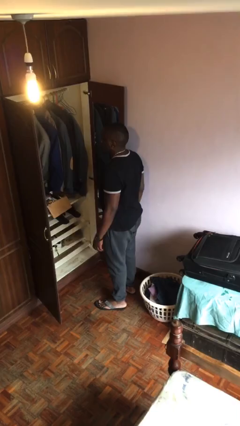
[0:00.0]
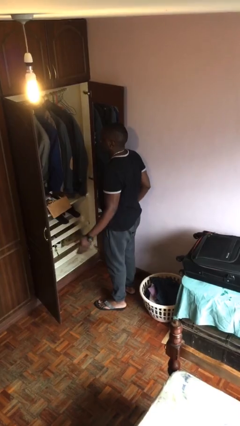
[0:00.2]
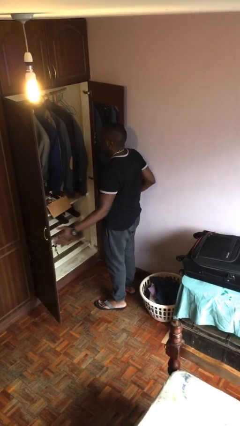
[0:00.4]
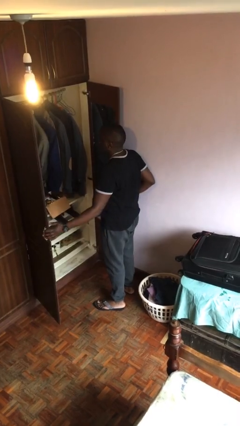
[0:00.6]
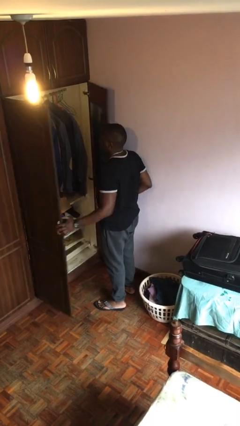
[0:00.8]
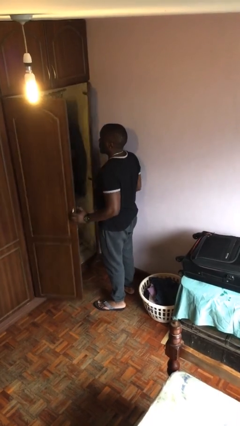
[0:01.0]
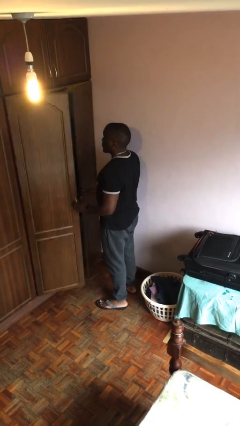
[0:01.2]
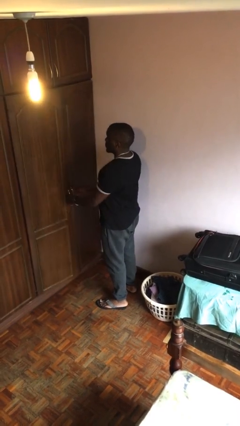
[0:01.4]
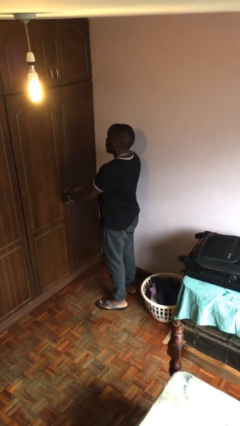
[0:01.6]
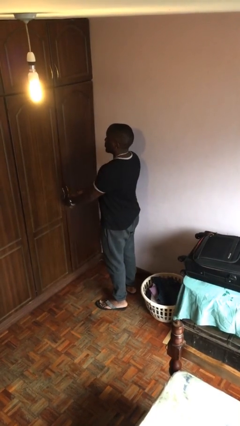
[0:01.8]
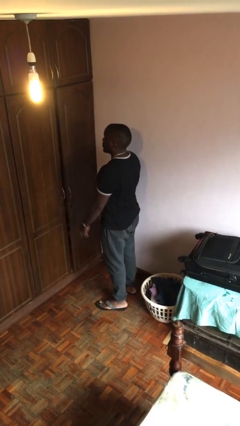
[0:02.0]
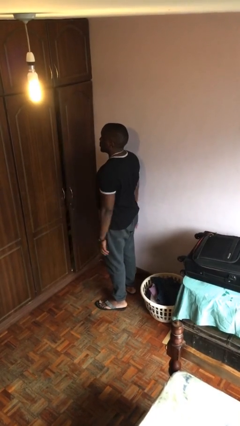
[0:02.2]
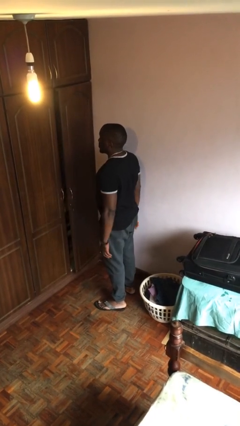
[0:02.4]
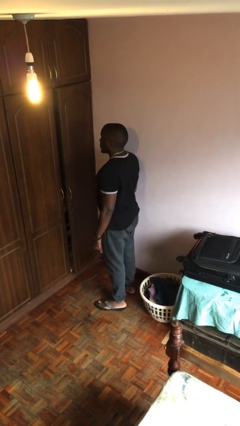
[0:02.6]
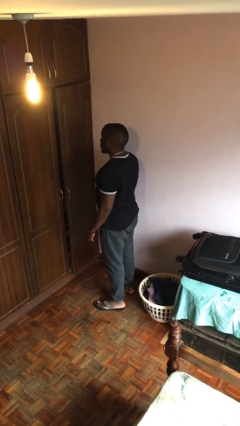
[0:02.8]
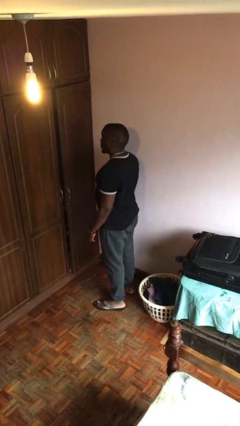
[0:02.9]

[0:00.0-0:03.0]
person closes closet door

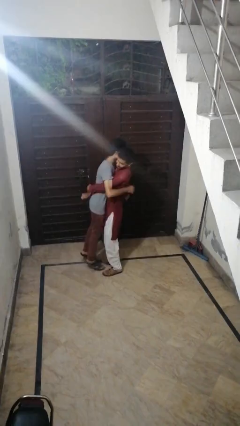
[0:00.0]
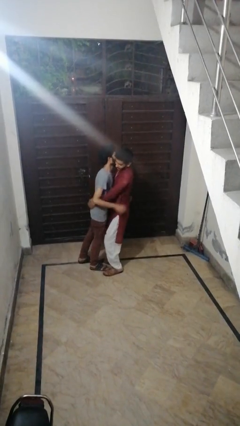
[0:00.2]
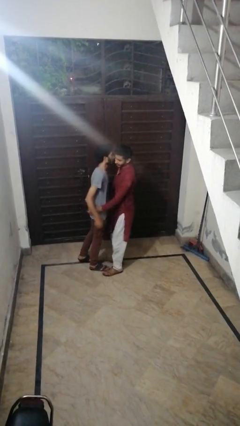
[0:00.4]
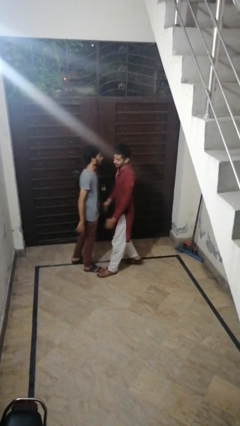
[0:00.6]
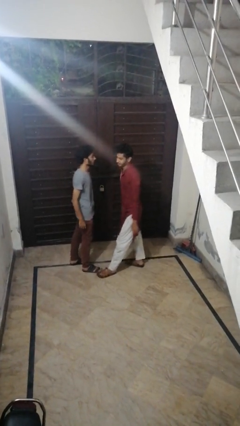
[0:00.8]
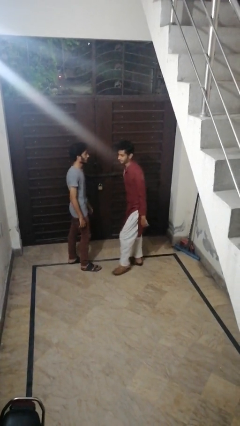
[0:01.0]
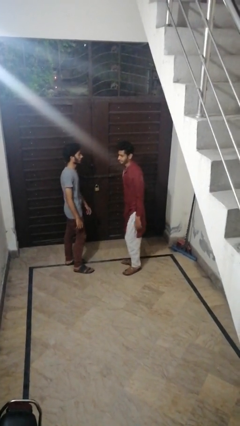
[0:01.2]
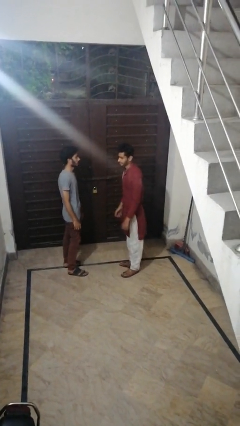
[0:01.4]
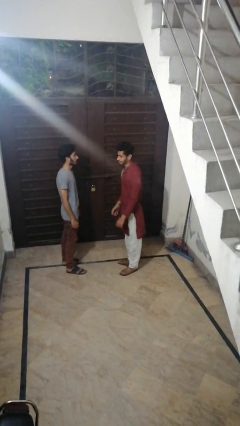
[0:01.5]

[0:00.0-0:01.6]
person puts down person

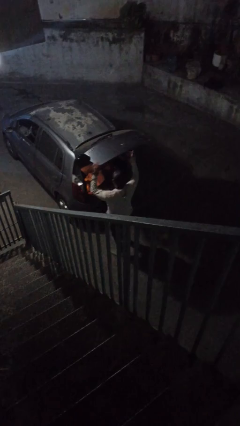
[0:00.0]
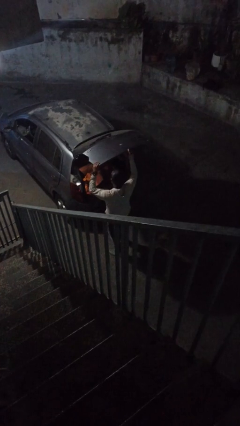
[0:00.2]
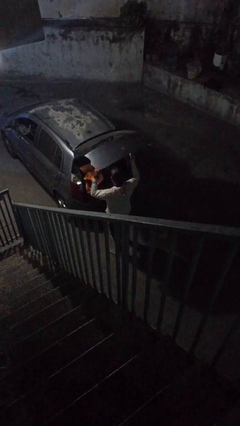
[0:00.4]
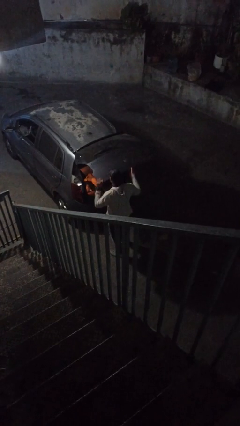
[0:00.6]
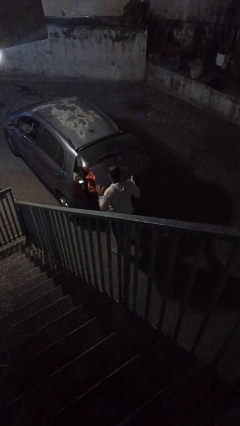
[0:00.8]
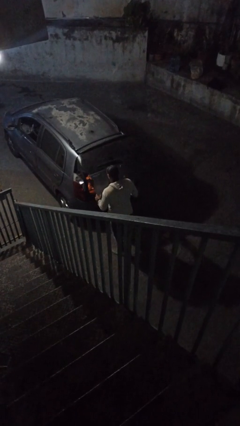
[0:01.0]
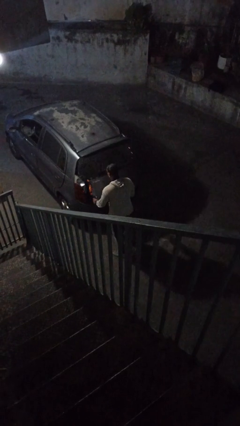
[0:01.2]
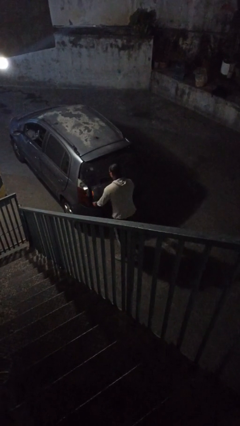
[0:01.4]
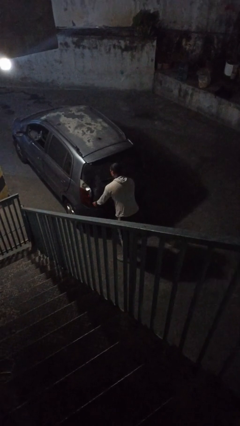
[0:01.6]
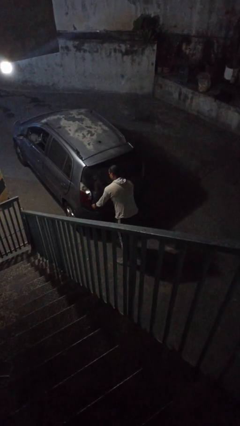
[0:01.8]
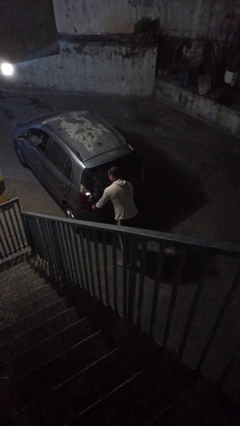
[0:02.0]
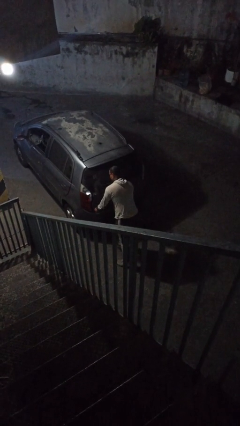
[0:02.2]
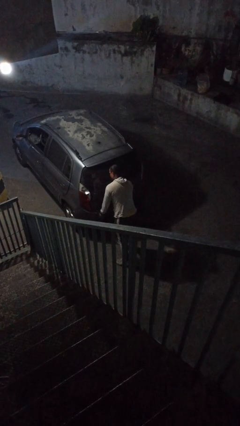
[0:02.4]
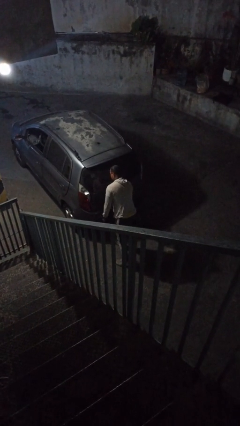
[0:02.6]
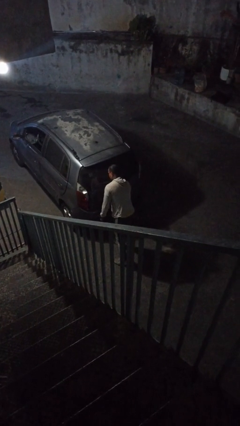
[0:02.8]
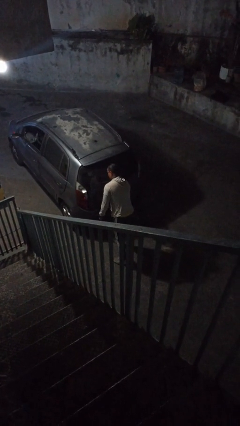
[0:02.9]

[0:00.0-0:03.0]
person closes car trunk

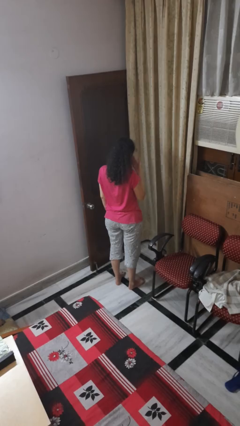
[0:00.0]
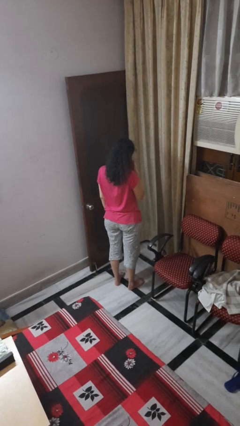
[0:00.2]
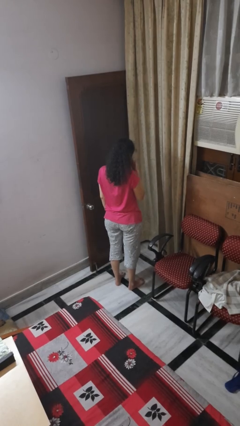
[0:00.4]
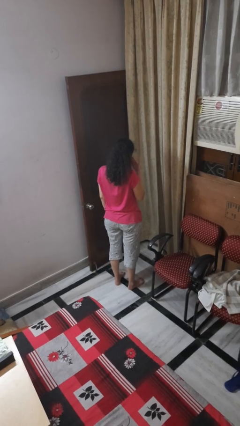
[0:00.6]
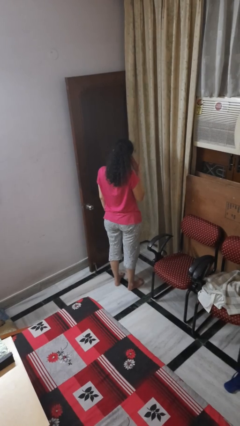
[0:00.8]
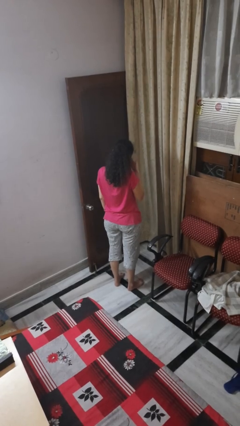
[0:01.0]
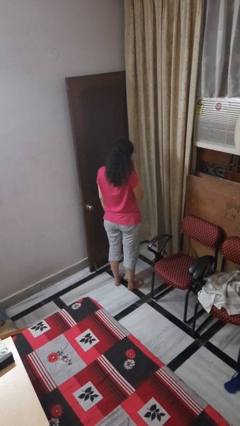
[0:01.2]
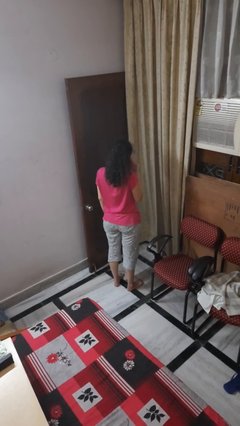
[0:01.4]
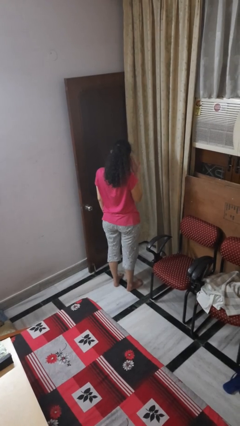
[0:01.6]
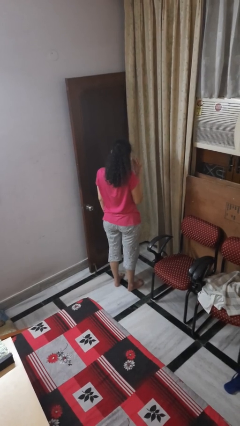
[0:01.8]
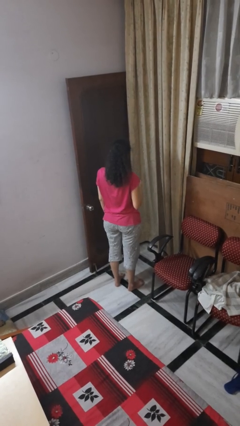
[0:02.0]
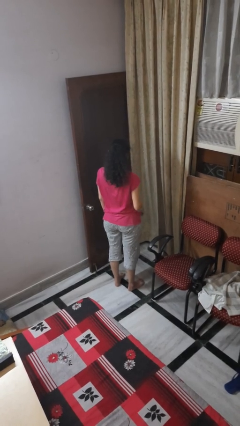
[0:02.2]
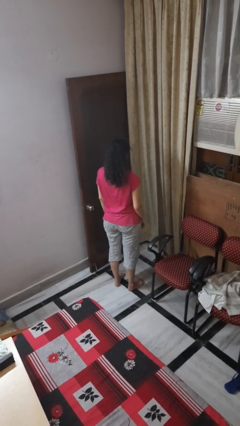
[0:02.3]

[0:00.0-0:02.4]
person rubs eyes

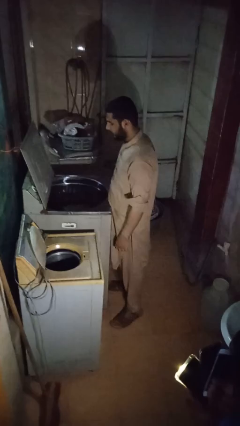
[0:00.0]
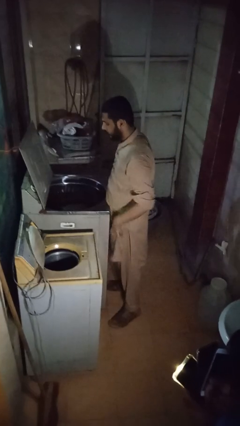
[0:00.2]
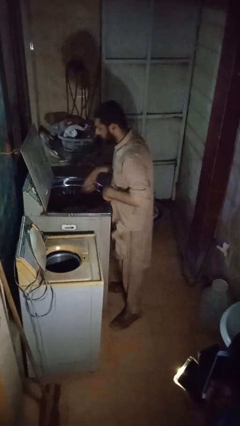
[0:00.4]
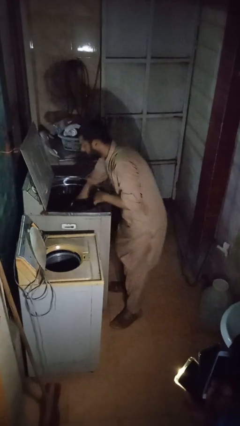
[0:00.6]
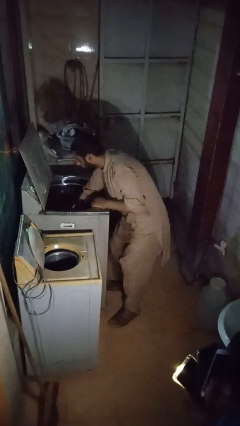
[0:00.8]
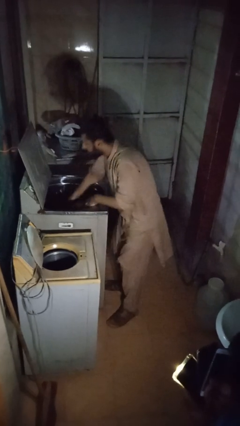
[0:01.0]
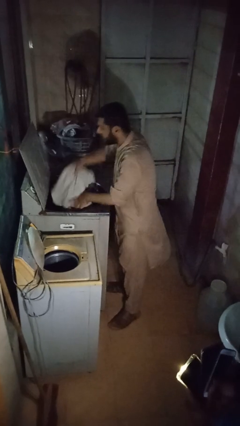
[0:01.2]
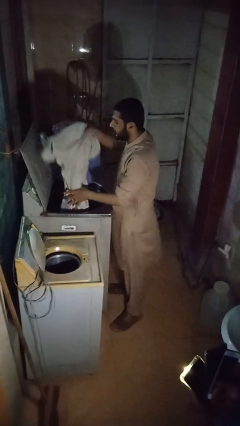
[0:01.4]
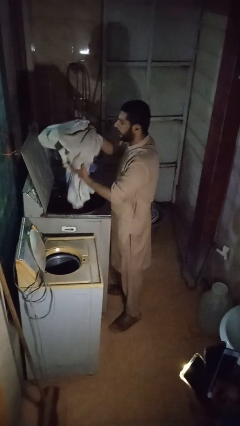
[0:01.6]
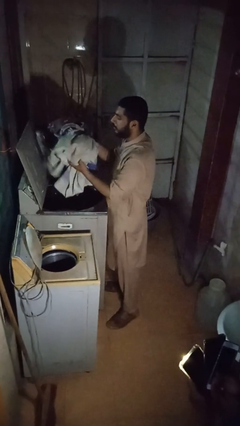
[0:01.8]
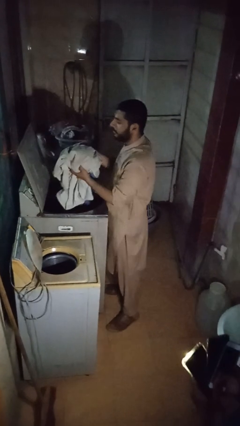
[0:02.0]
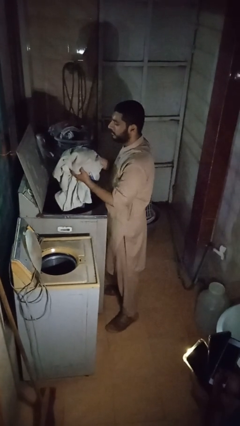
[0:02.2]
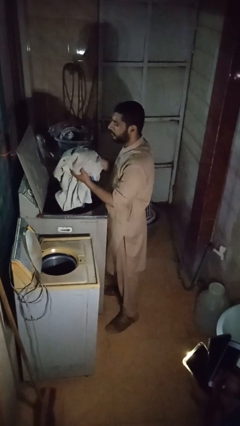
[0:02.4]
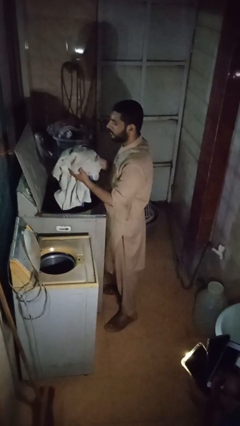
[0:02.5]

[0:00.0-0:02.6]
person unloads clotheswasher

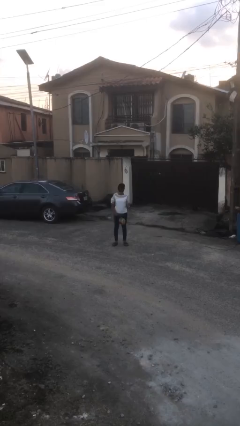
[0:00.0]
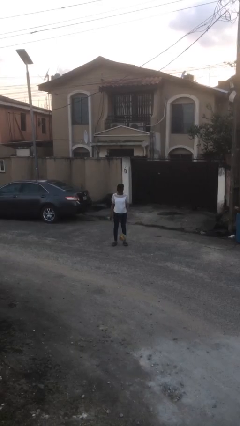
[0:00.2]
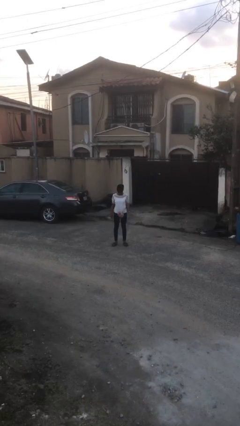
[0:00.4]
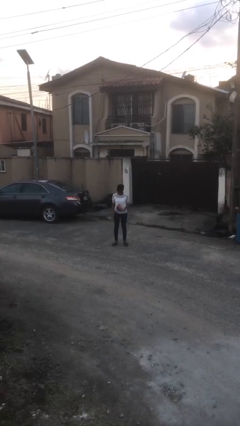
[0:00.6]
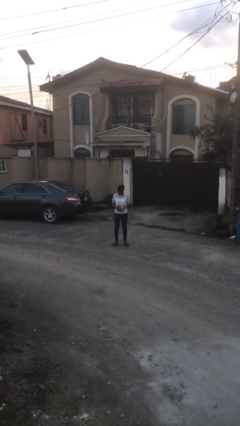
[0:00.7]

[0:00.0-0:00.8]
person bounces ball on floor

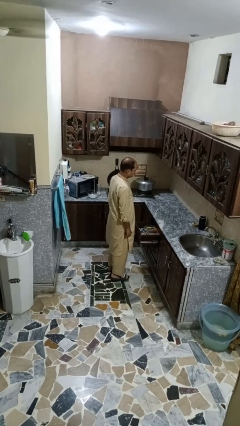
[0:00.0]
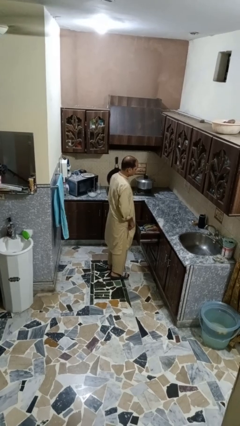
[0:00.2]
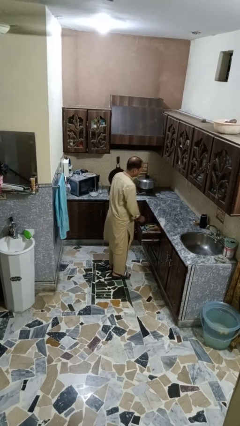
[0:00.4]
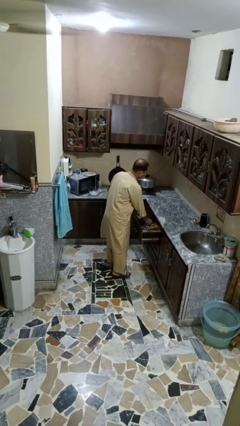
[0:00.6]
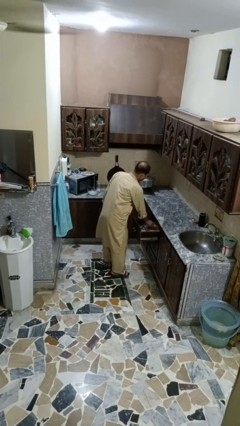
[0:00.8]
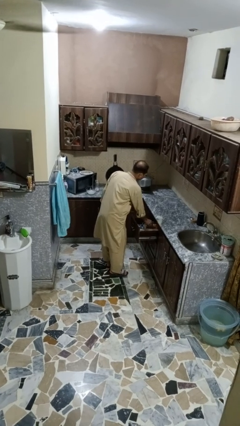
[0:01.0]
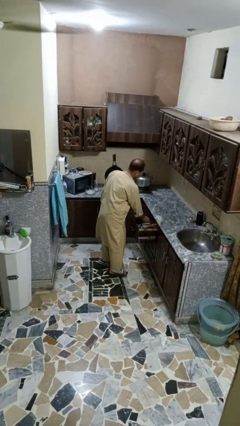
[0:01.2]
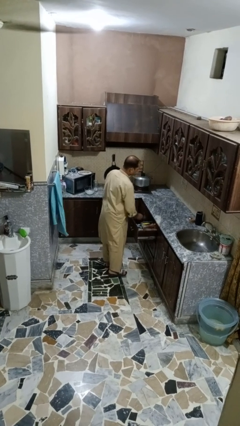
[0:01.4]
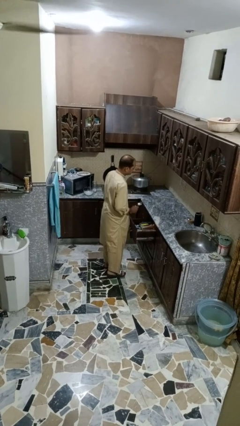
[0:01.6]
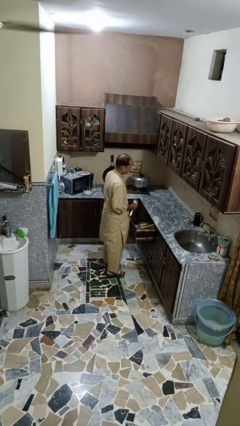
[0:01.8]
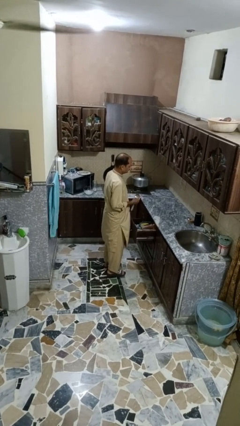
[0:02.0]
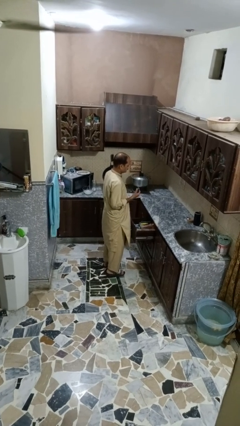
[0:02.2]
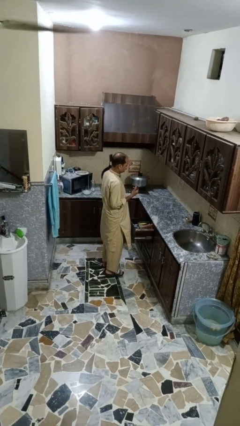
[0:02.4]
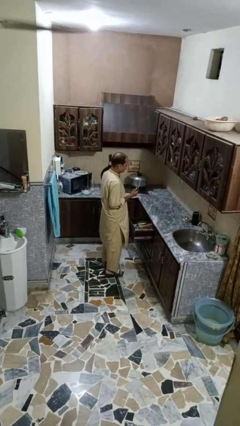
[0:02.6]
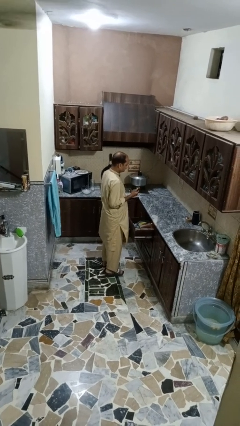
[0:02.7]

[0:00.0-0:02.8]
person takes object from kitchen drawer

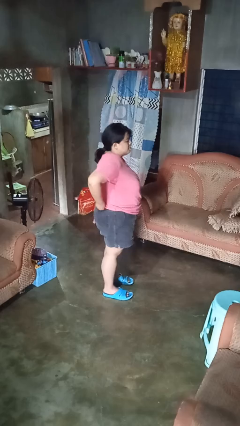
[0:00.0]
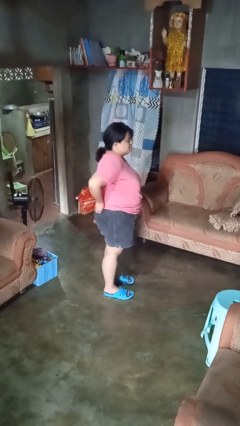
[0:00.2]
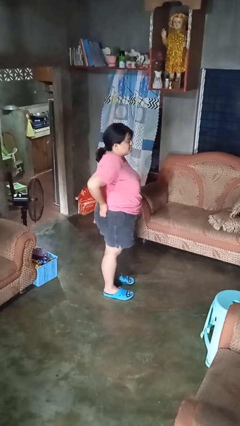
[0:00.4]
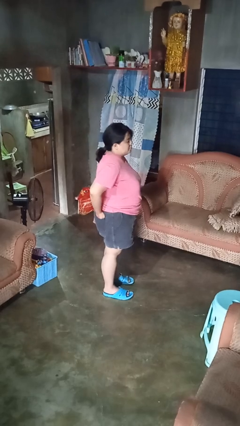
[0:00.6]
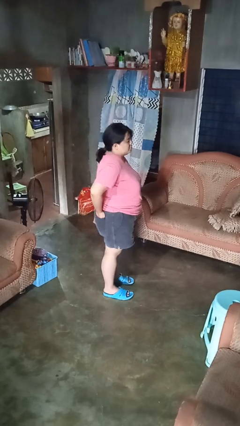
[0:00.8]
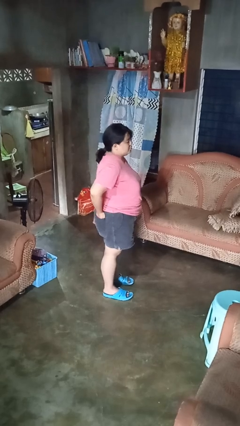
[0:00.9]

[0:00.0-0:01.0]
person puts hands in back pockets
